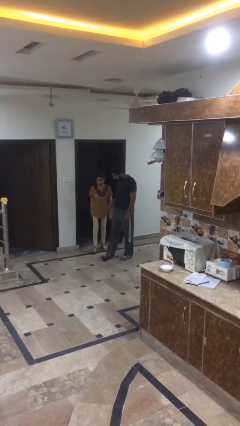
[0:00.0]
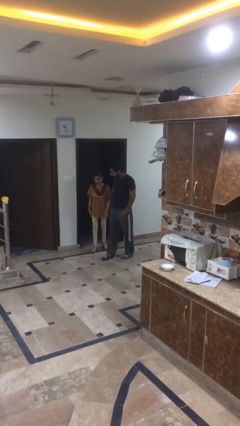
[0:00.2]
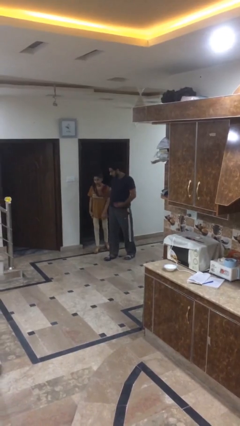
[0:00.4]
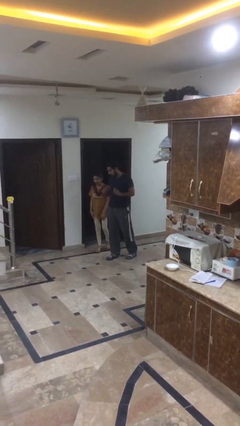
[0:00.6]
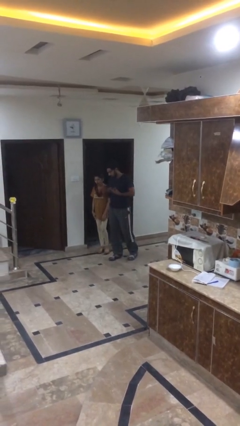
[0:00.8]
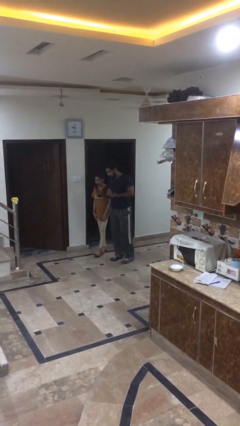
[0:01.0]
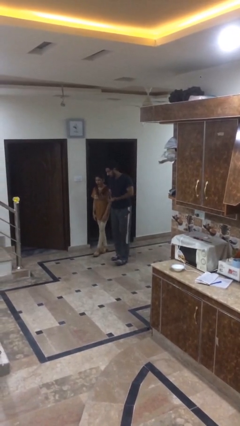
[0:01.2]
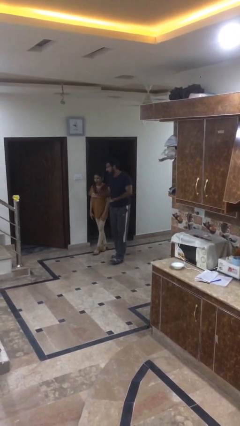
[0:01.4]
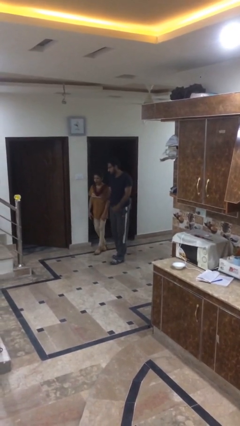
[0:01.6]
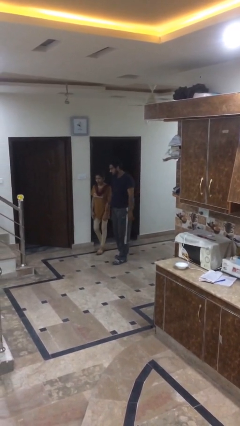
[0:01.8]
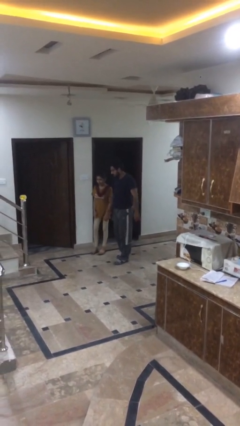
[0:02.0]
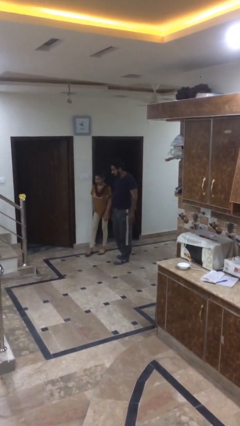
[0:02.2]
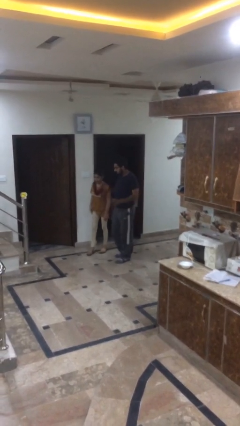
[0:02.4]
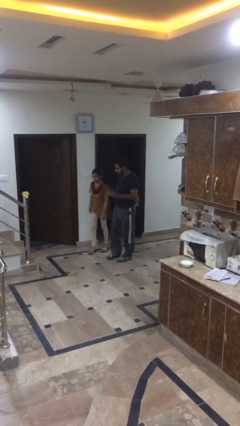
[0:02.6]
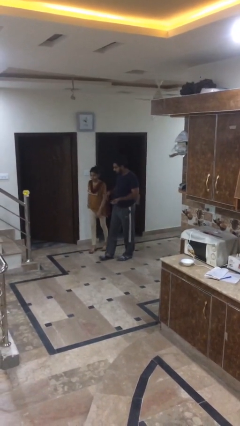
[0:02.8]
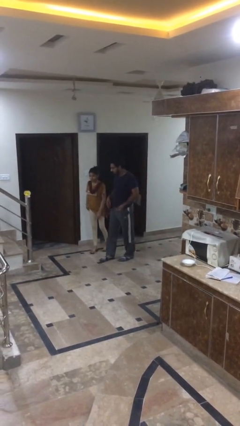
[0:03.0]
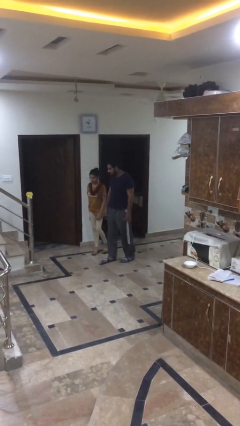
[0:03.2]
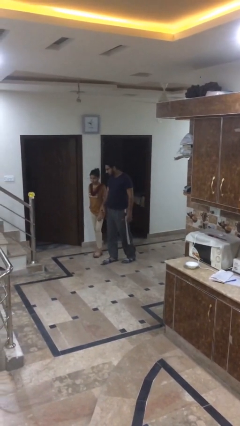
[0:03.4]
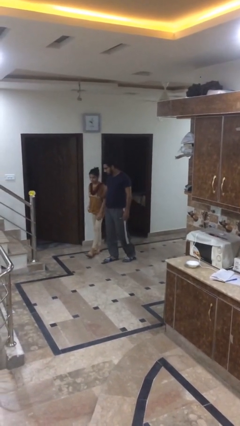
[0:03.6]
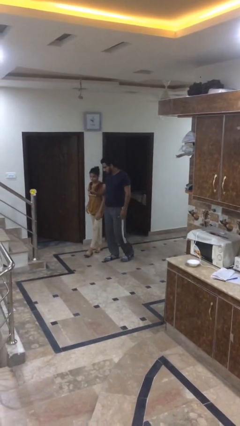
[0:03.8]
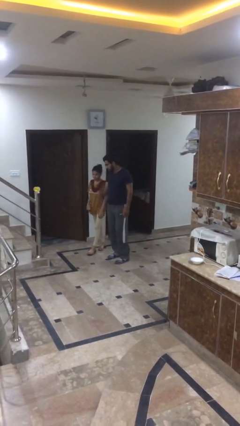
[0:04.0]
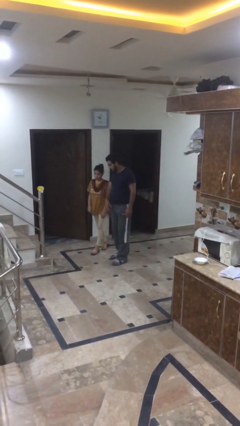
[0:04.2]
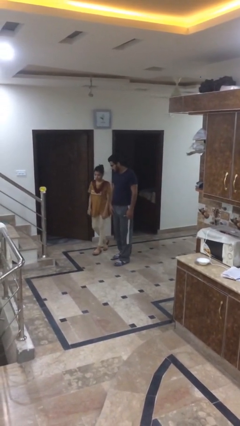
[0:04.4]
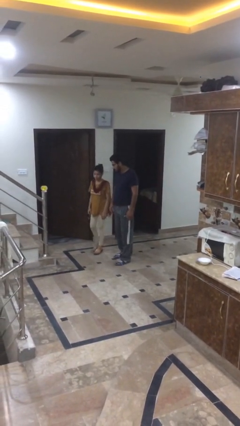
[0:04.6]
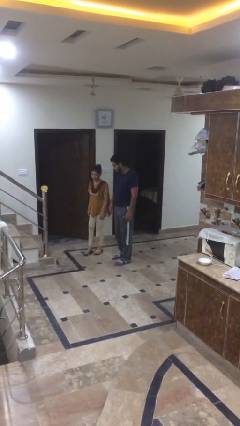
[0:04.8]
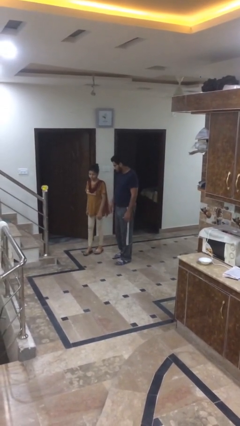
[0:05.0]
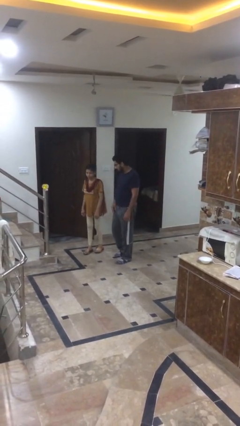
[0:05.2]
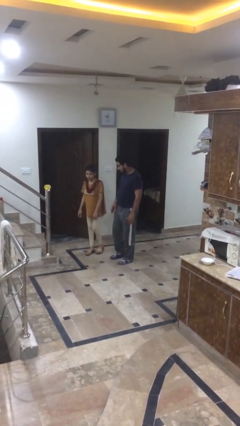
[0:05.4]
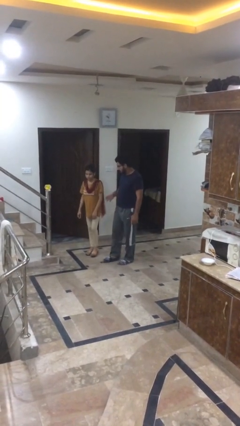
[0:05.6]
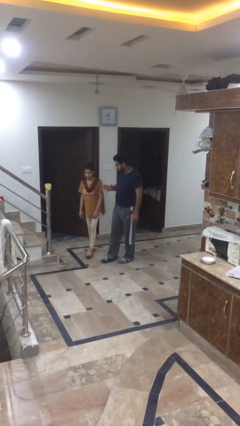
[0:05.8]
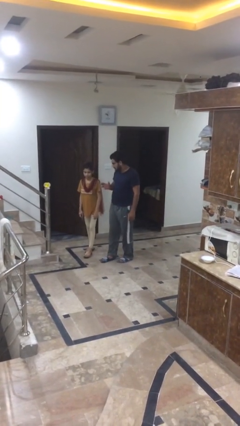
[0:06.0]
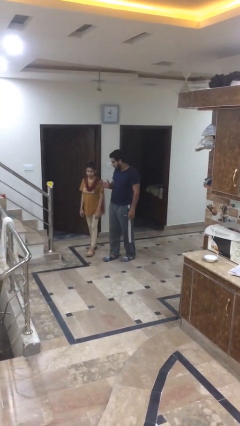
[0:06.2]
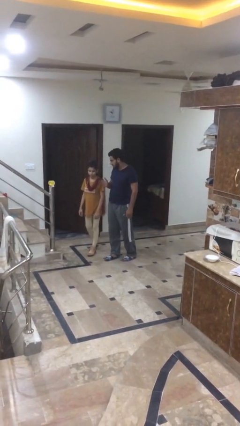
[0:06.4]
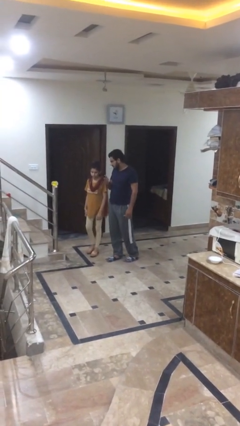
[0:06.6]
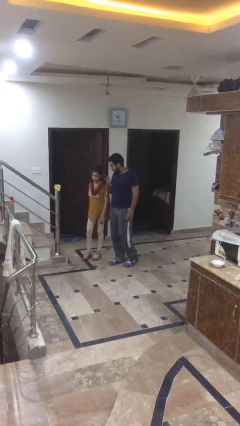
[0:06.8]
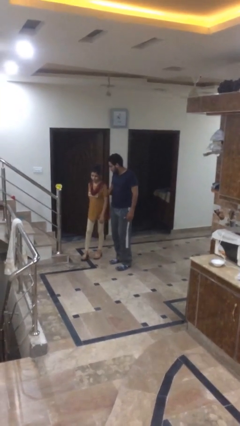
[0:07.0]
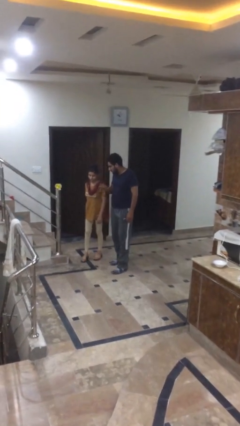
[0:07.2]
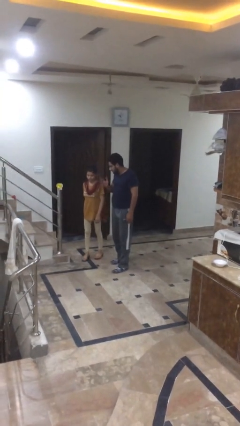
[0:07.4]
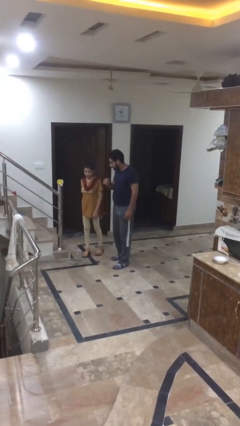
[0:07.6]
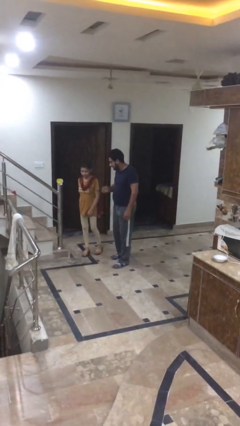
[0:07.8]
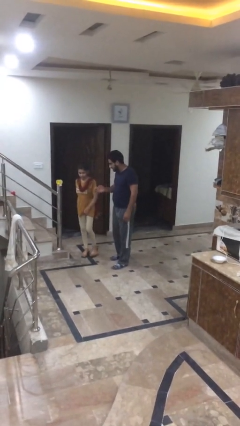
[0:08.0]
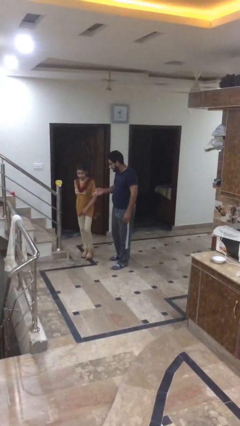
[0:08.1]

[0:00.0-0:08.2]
person talks to person

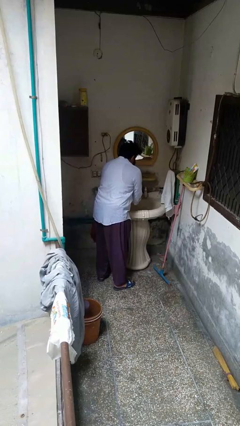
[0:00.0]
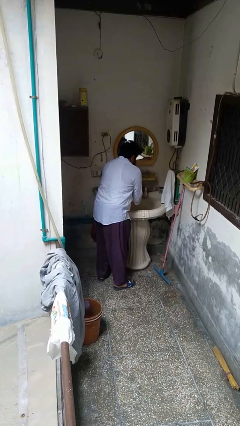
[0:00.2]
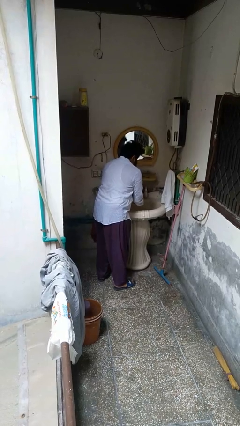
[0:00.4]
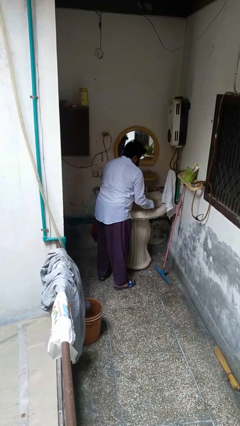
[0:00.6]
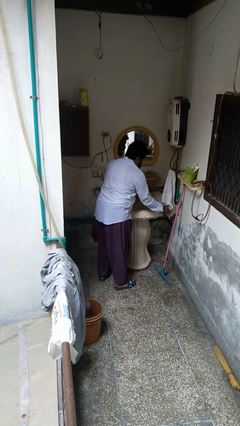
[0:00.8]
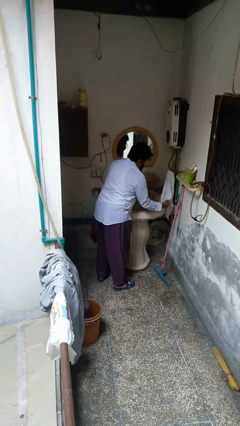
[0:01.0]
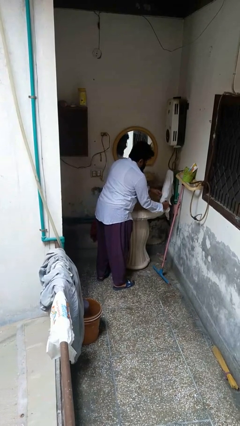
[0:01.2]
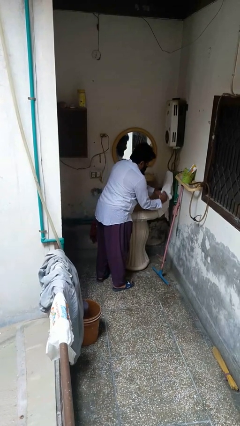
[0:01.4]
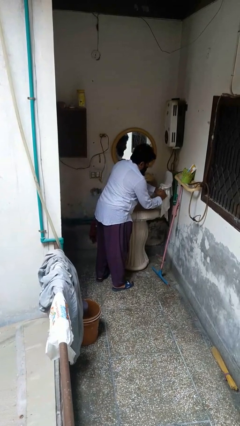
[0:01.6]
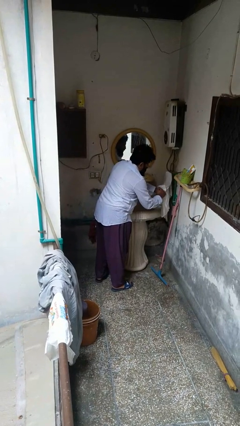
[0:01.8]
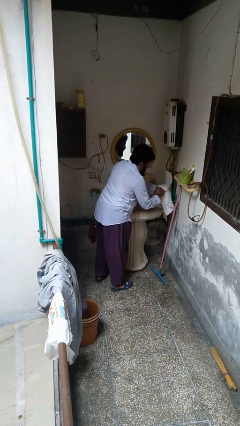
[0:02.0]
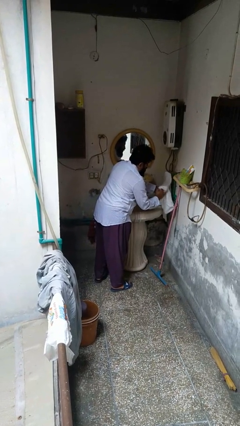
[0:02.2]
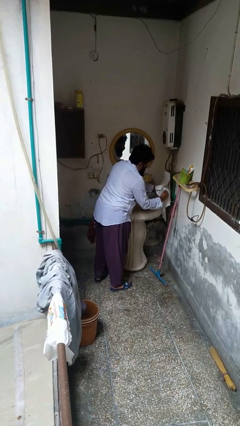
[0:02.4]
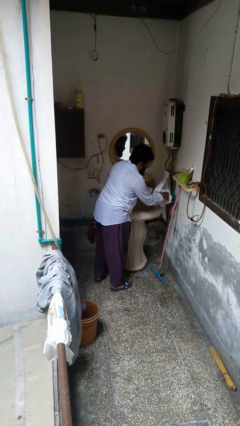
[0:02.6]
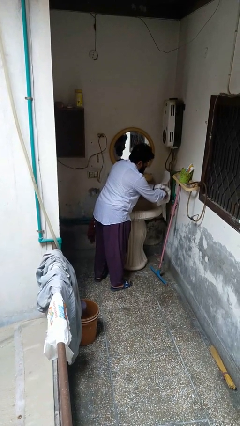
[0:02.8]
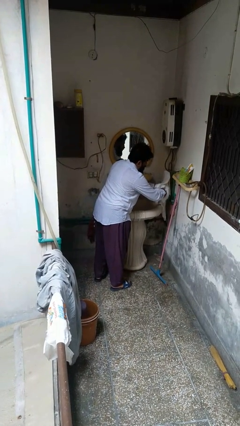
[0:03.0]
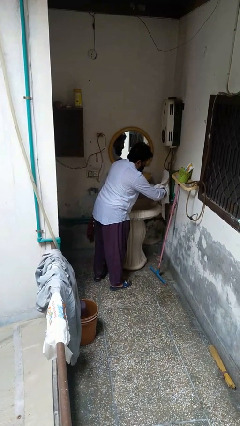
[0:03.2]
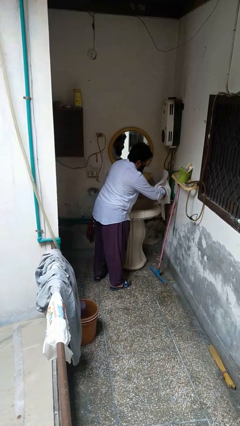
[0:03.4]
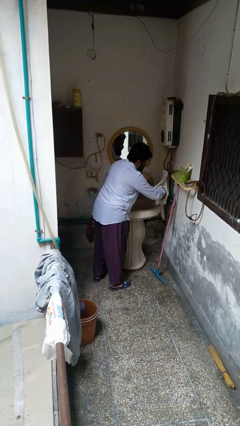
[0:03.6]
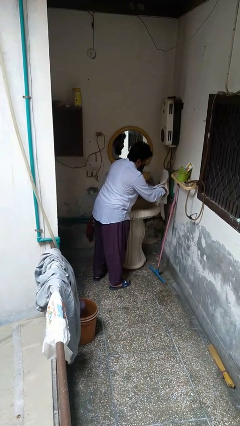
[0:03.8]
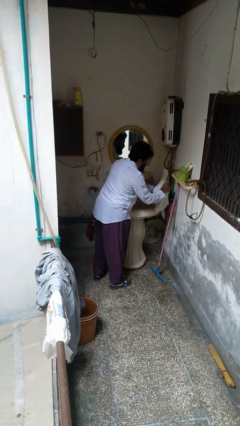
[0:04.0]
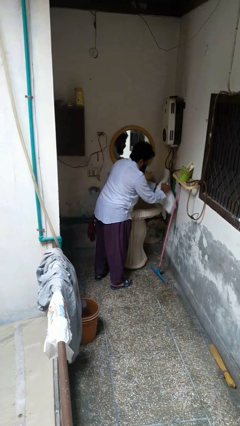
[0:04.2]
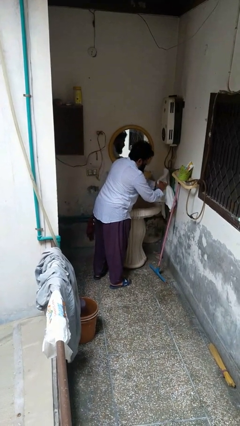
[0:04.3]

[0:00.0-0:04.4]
person dries hands with towel

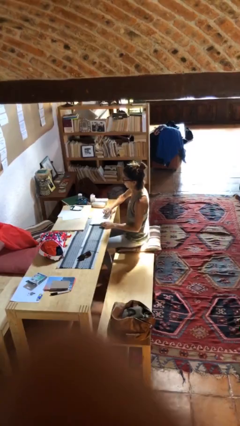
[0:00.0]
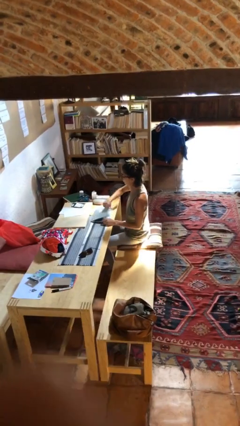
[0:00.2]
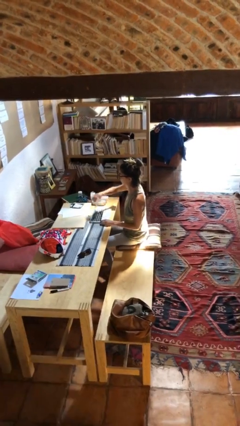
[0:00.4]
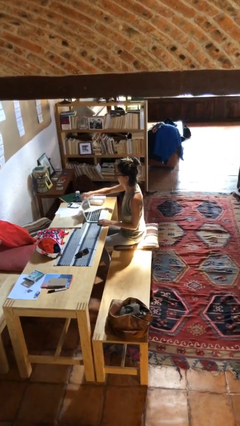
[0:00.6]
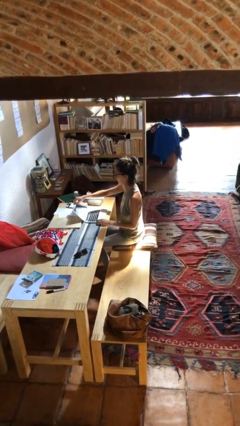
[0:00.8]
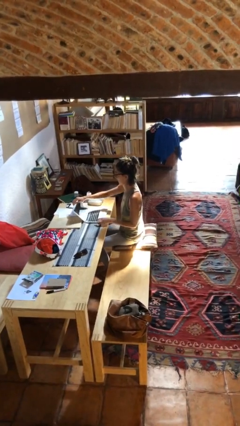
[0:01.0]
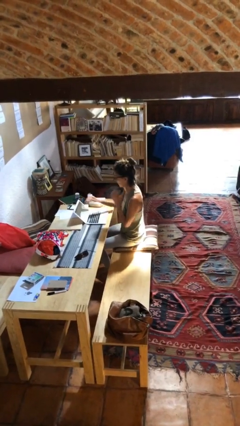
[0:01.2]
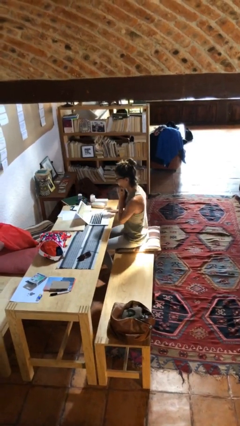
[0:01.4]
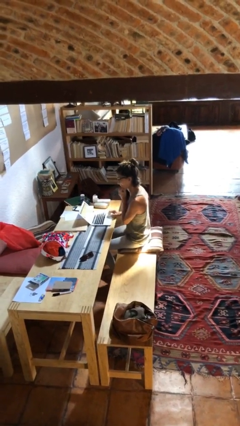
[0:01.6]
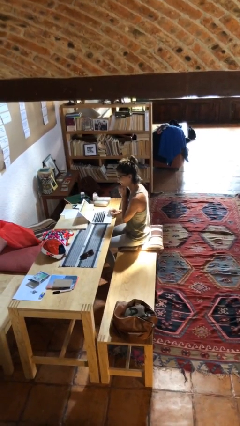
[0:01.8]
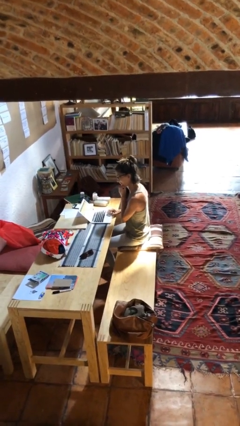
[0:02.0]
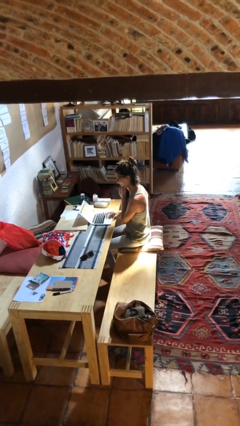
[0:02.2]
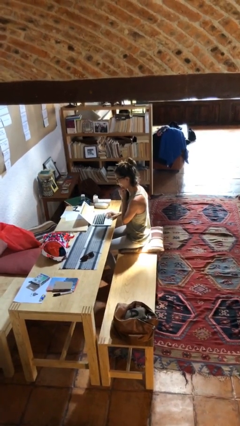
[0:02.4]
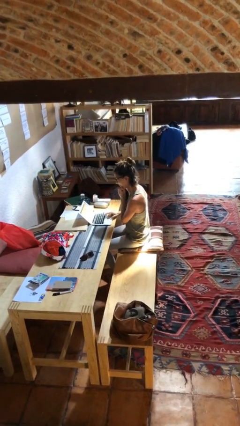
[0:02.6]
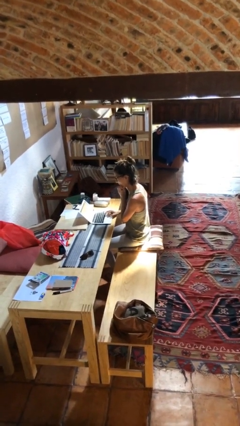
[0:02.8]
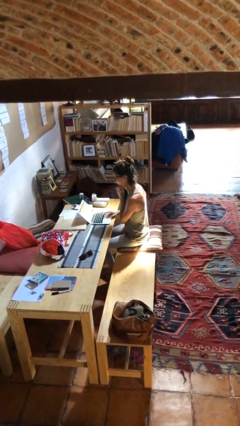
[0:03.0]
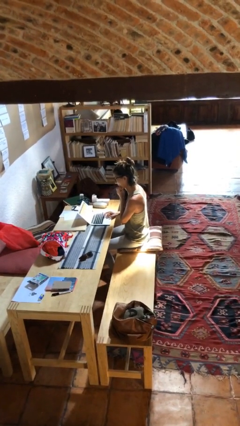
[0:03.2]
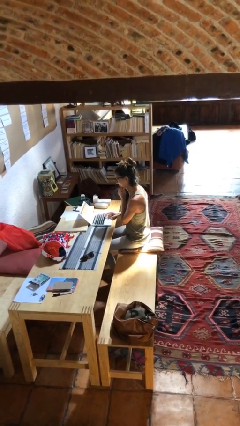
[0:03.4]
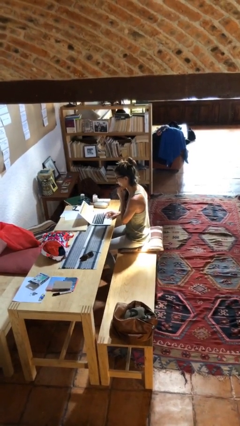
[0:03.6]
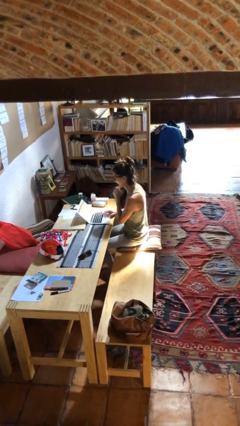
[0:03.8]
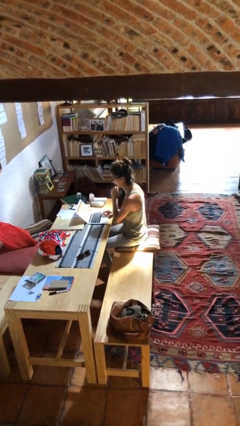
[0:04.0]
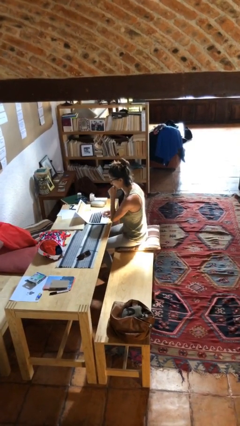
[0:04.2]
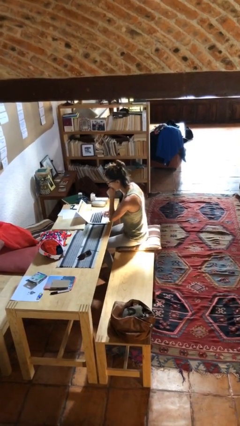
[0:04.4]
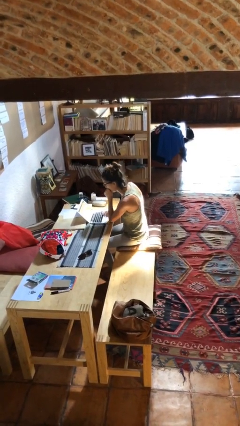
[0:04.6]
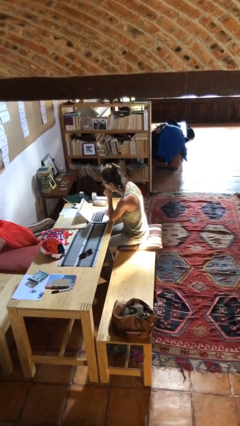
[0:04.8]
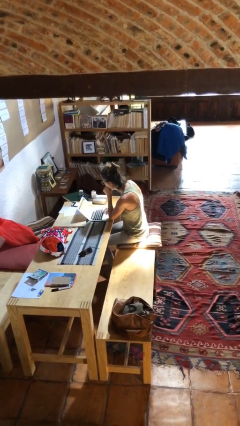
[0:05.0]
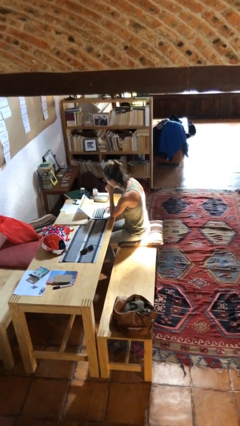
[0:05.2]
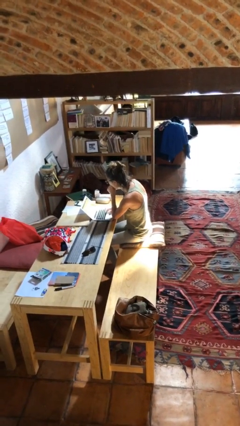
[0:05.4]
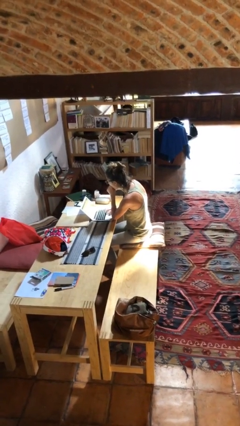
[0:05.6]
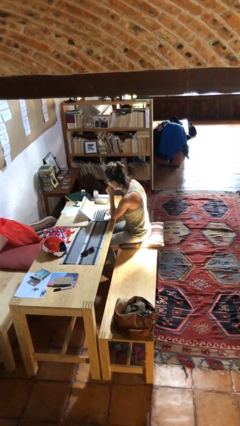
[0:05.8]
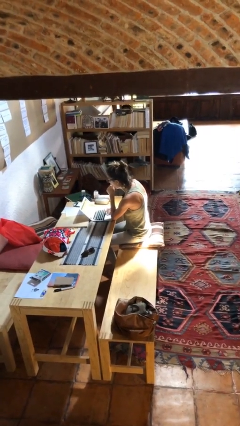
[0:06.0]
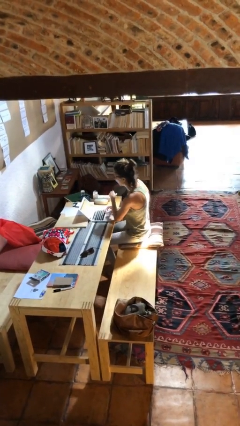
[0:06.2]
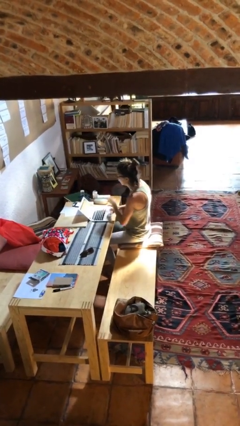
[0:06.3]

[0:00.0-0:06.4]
person interacts with laptop
